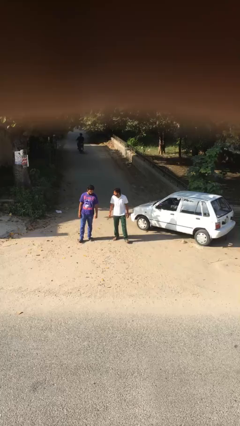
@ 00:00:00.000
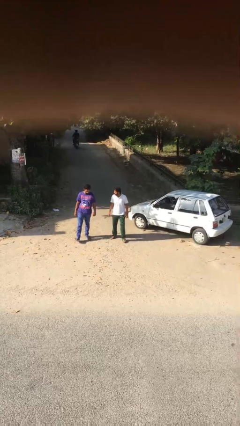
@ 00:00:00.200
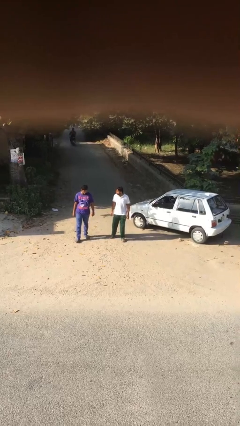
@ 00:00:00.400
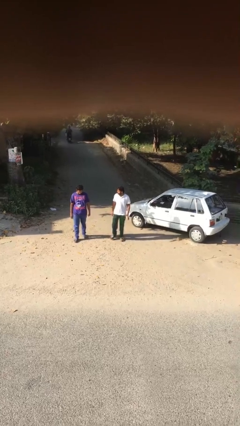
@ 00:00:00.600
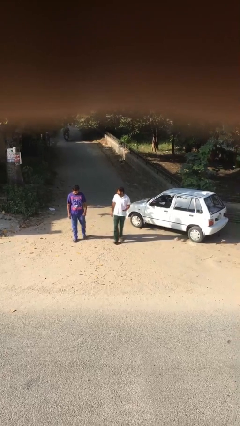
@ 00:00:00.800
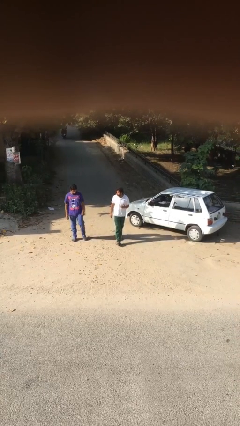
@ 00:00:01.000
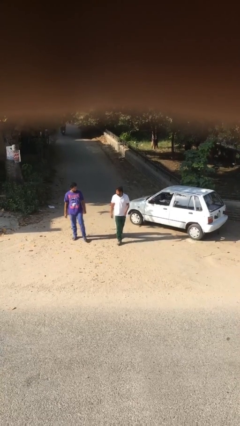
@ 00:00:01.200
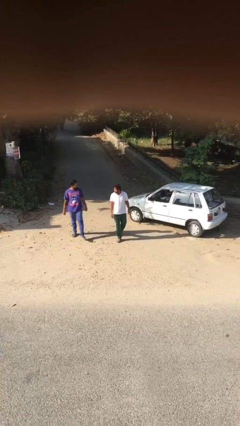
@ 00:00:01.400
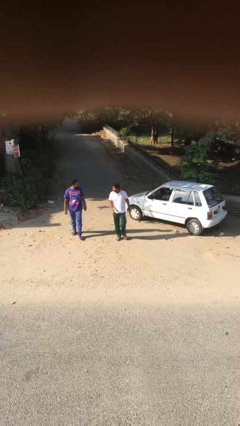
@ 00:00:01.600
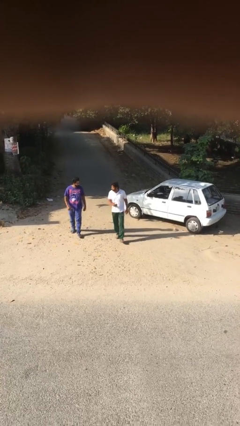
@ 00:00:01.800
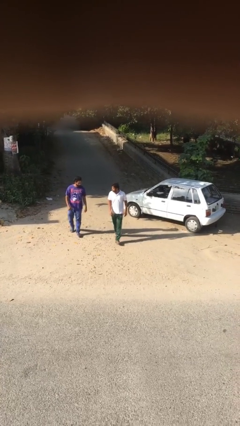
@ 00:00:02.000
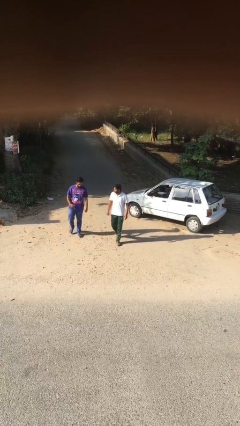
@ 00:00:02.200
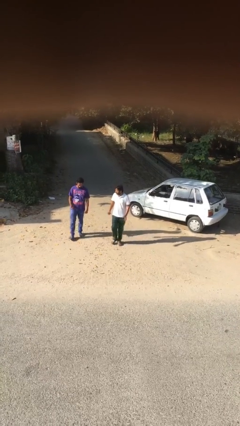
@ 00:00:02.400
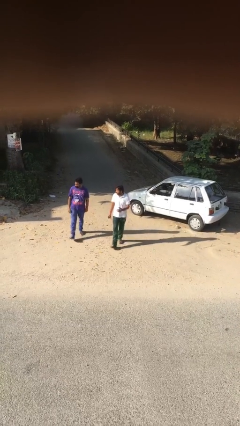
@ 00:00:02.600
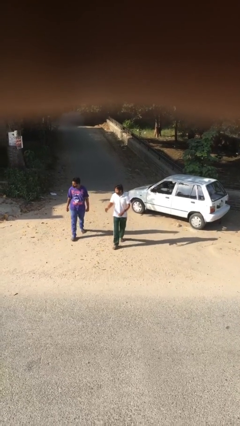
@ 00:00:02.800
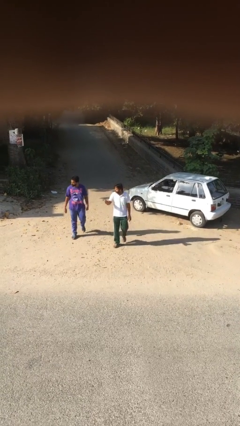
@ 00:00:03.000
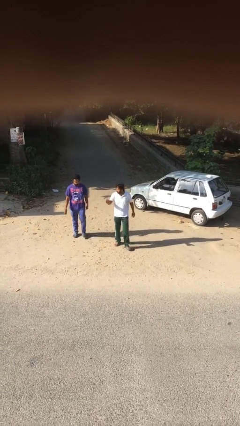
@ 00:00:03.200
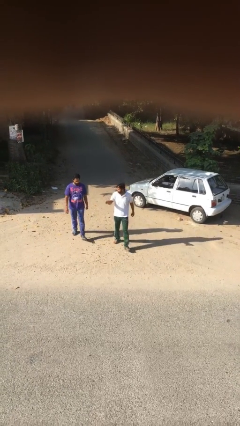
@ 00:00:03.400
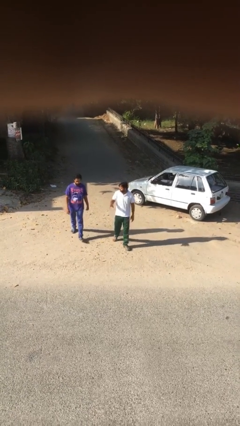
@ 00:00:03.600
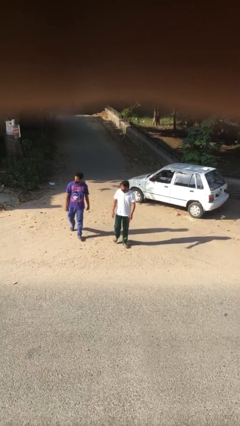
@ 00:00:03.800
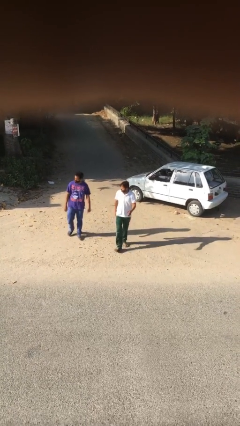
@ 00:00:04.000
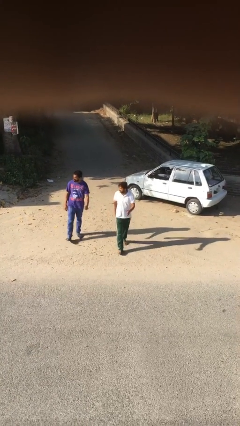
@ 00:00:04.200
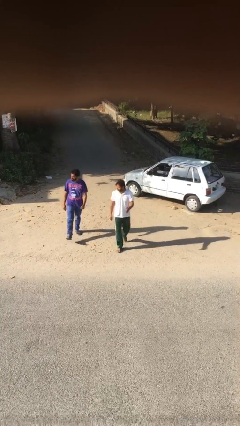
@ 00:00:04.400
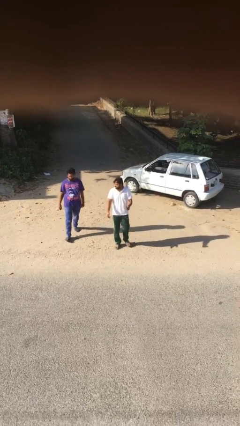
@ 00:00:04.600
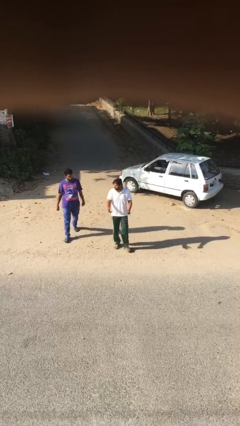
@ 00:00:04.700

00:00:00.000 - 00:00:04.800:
person talks to person

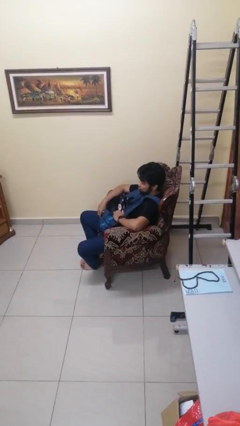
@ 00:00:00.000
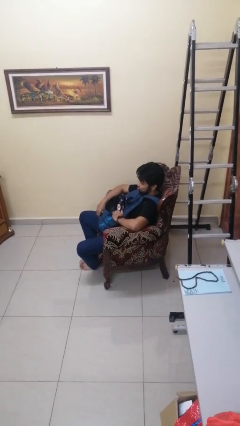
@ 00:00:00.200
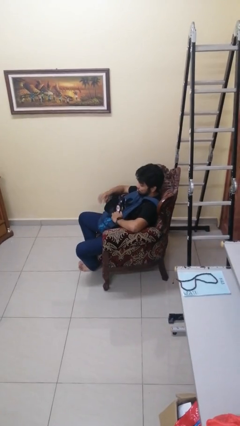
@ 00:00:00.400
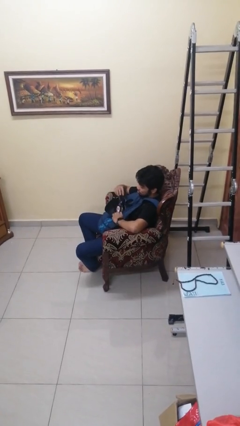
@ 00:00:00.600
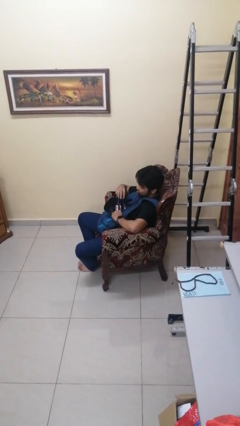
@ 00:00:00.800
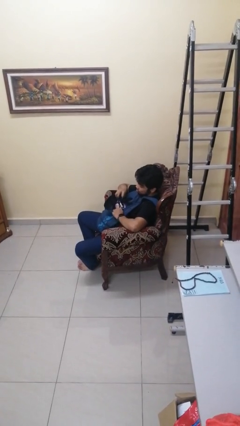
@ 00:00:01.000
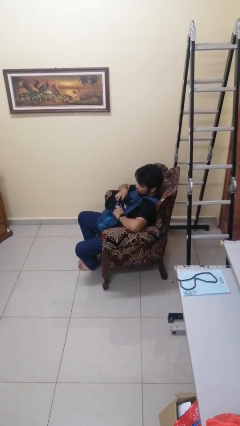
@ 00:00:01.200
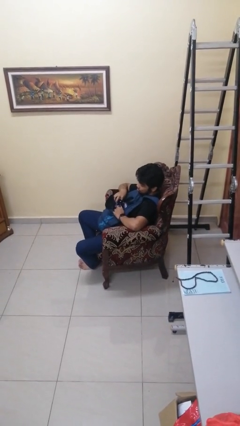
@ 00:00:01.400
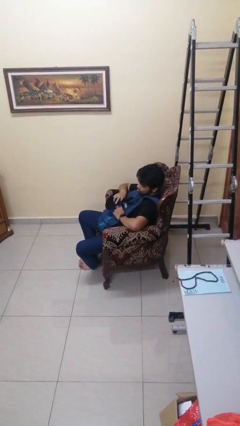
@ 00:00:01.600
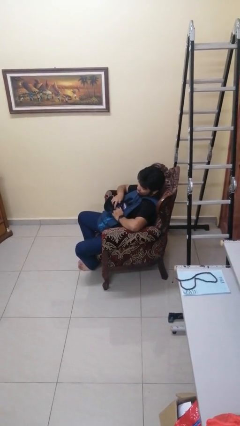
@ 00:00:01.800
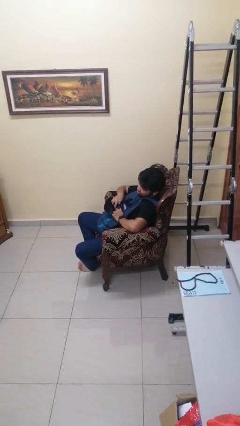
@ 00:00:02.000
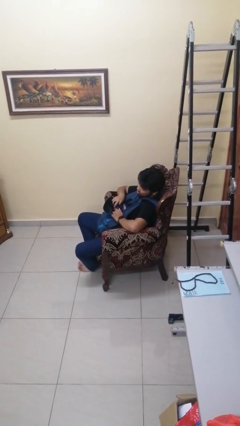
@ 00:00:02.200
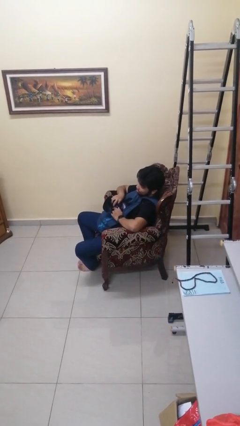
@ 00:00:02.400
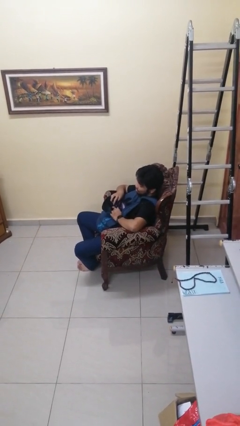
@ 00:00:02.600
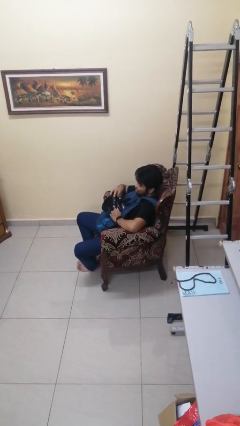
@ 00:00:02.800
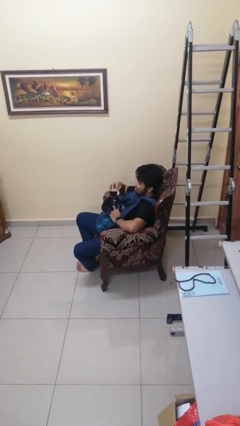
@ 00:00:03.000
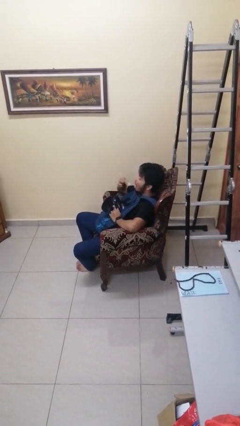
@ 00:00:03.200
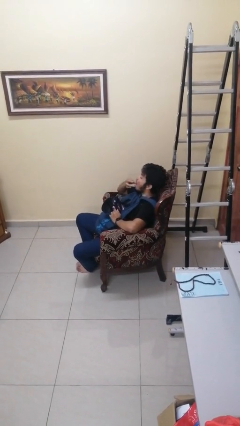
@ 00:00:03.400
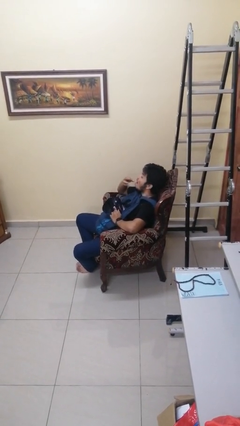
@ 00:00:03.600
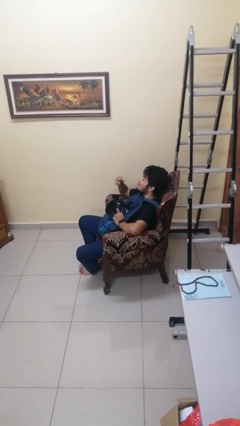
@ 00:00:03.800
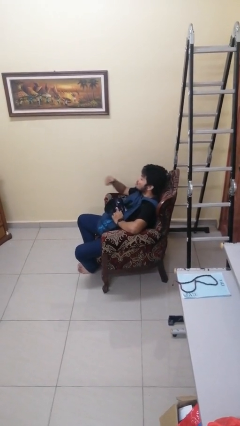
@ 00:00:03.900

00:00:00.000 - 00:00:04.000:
person eats snack from bag

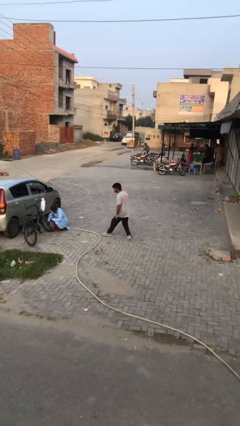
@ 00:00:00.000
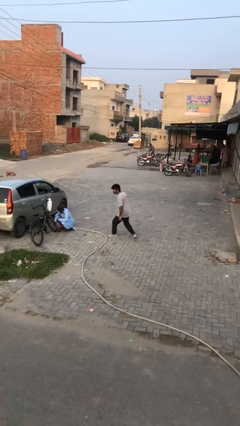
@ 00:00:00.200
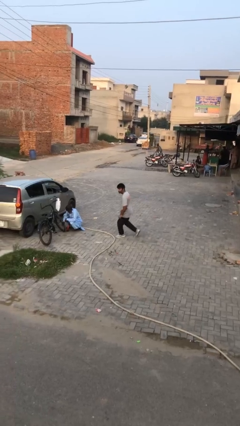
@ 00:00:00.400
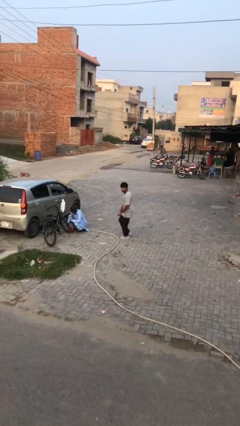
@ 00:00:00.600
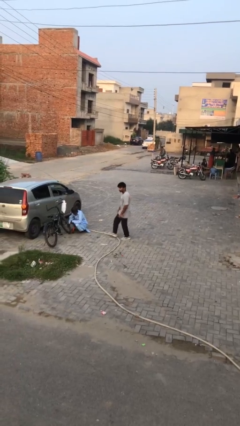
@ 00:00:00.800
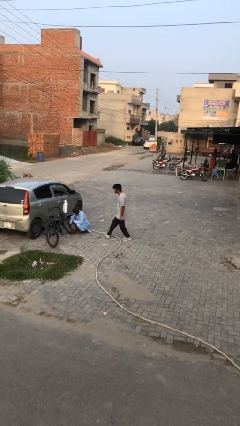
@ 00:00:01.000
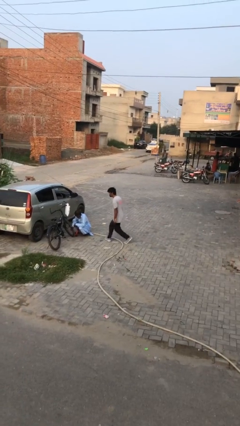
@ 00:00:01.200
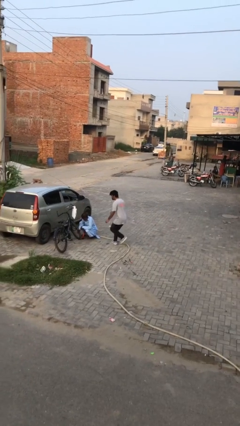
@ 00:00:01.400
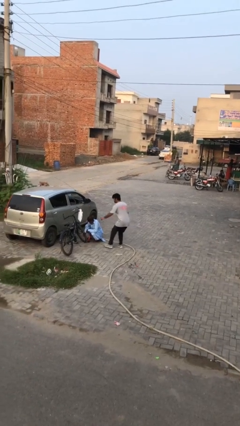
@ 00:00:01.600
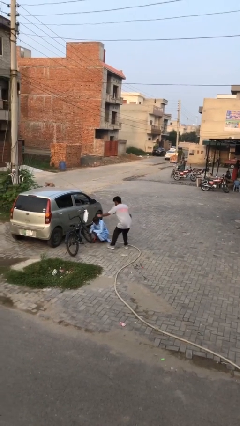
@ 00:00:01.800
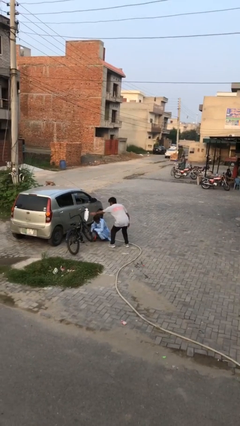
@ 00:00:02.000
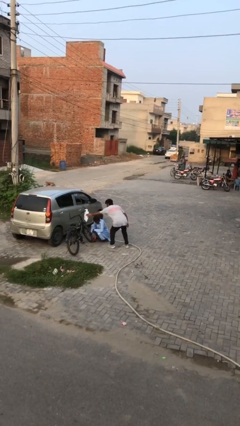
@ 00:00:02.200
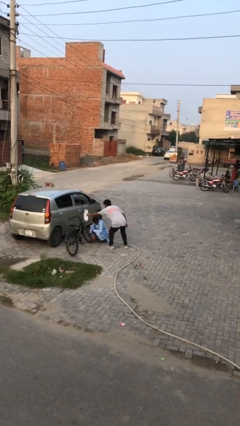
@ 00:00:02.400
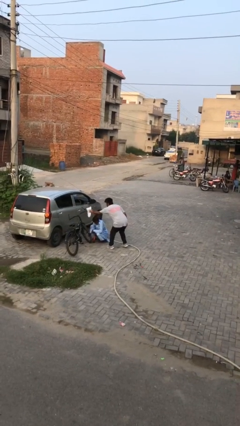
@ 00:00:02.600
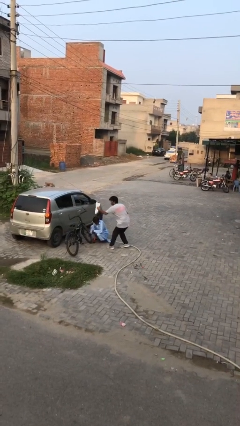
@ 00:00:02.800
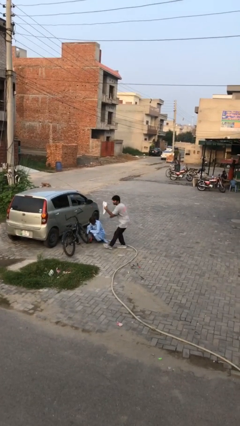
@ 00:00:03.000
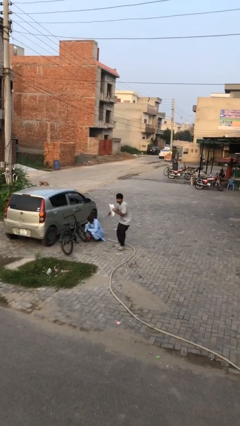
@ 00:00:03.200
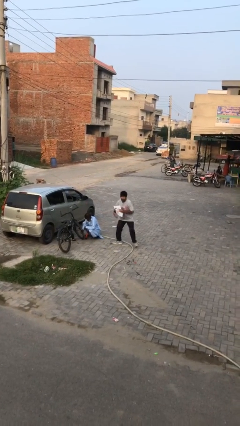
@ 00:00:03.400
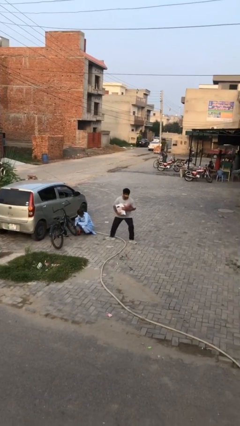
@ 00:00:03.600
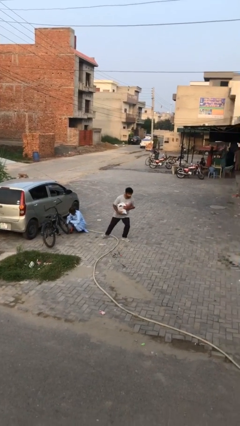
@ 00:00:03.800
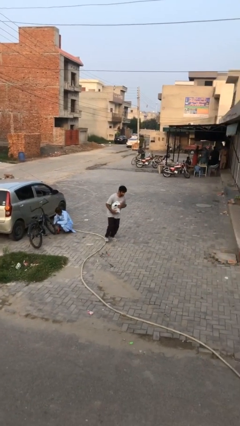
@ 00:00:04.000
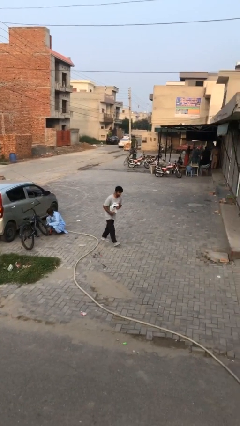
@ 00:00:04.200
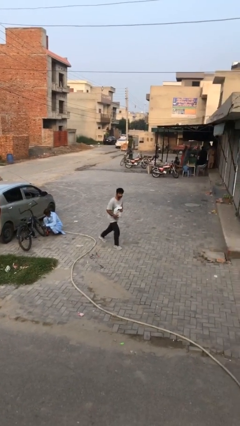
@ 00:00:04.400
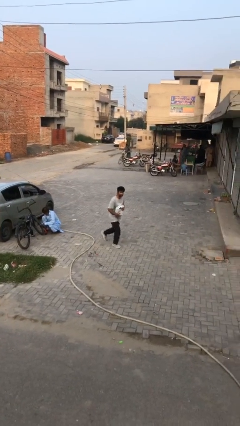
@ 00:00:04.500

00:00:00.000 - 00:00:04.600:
person steals object from person

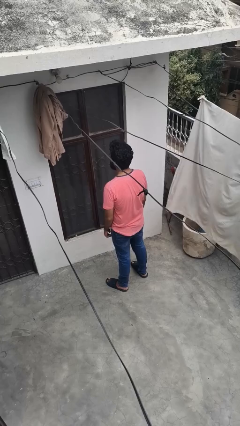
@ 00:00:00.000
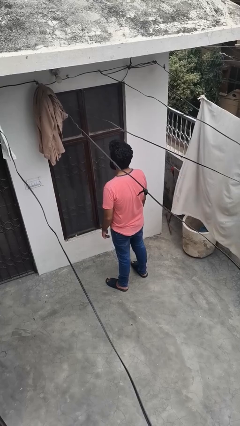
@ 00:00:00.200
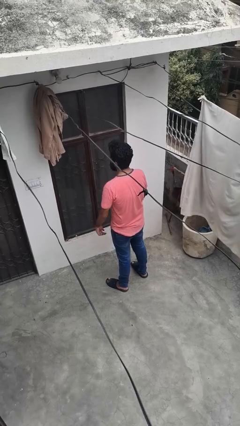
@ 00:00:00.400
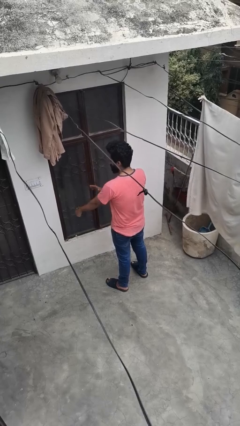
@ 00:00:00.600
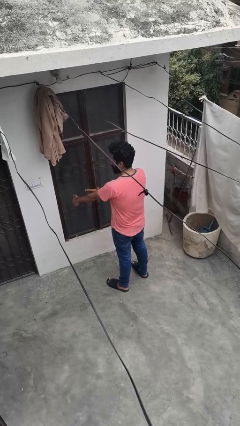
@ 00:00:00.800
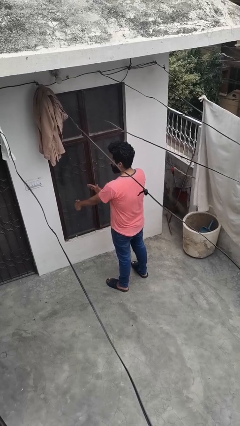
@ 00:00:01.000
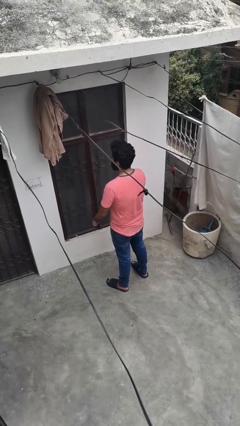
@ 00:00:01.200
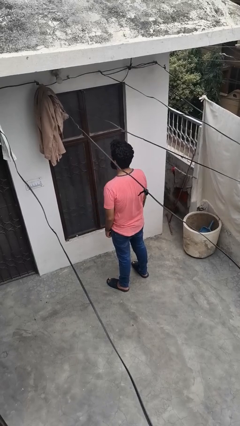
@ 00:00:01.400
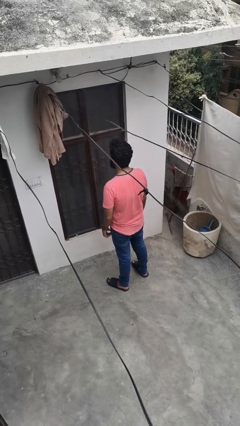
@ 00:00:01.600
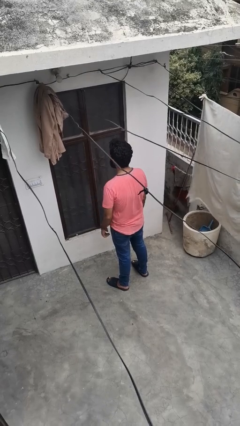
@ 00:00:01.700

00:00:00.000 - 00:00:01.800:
person swats bug

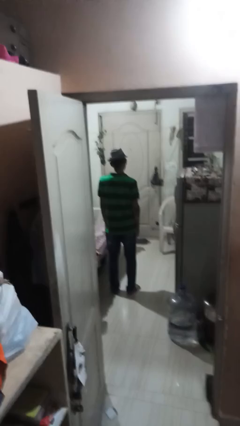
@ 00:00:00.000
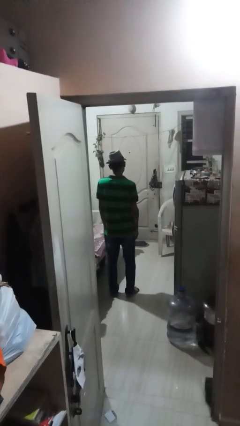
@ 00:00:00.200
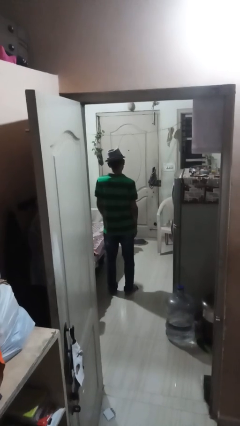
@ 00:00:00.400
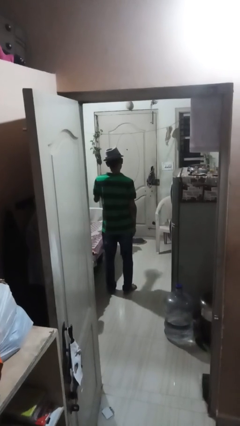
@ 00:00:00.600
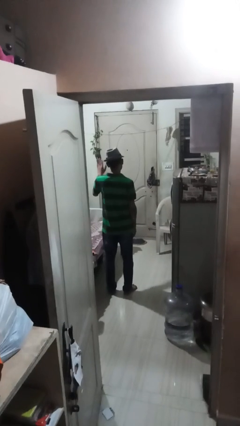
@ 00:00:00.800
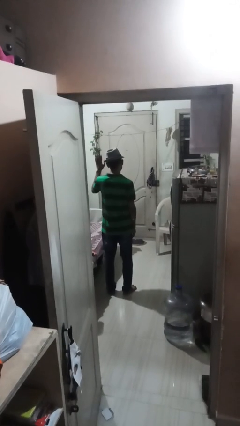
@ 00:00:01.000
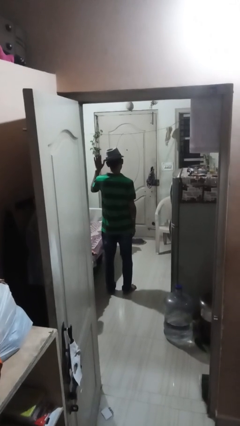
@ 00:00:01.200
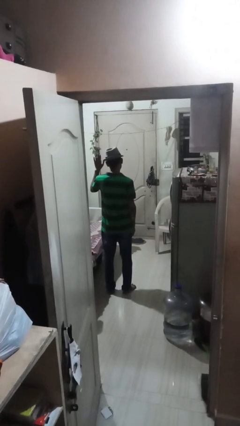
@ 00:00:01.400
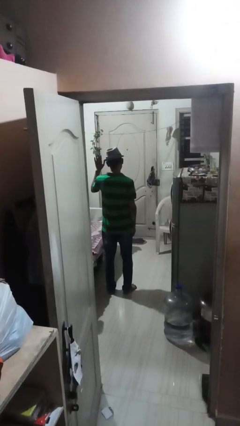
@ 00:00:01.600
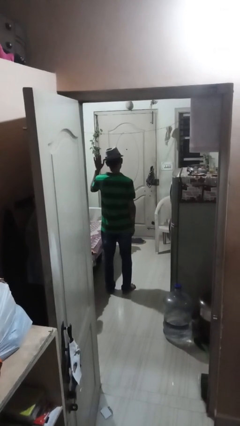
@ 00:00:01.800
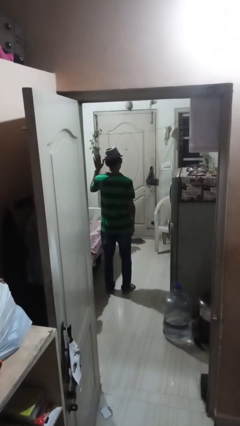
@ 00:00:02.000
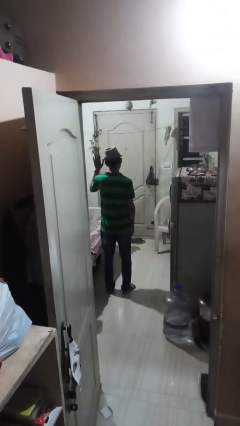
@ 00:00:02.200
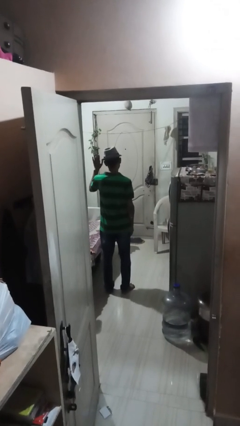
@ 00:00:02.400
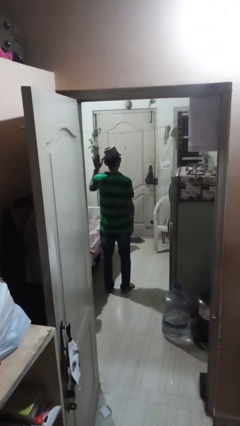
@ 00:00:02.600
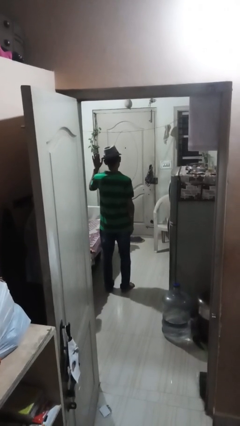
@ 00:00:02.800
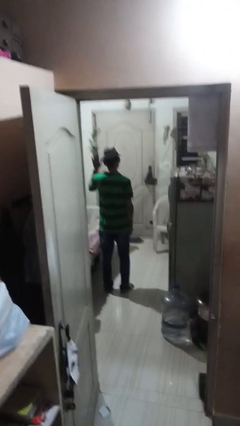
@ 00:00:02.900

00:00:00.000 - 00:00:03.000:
person gestures number five
